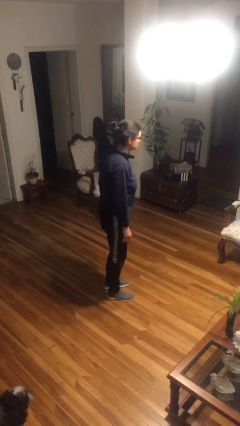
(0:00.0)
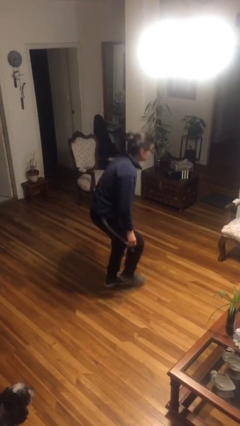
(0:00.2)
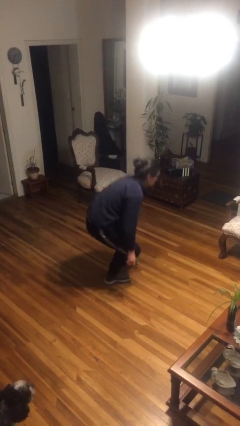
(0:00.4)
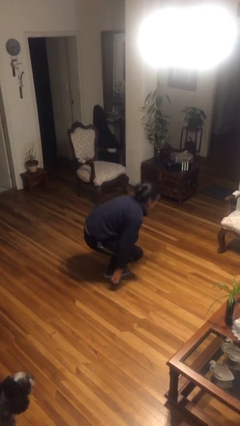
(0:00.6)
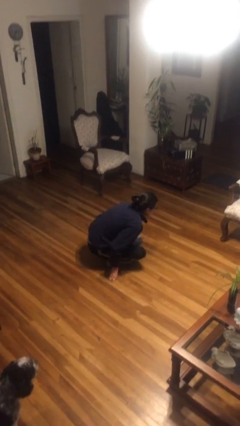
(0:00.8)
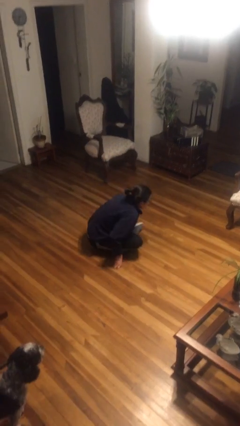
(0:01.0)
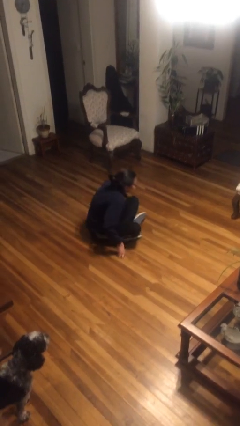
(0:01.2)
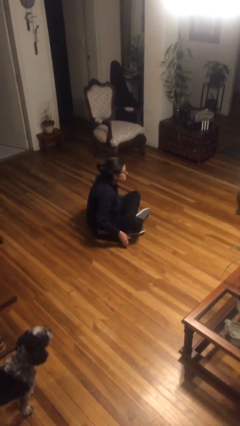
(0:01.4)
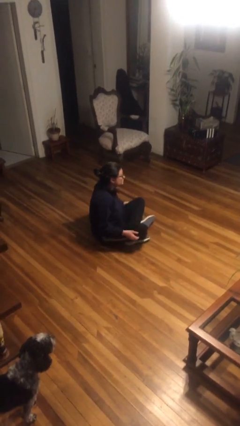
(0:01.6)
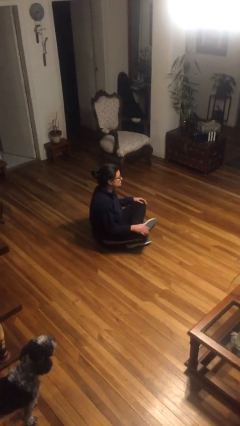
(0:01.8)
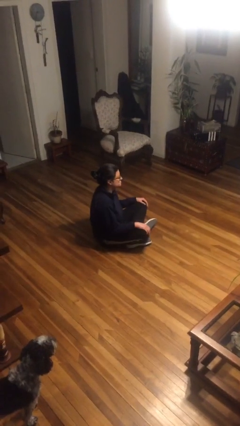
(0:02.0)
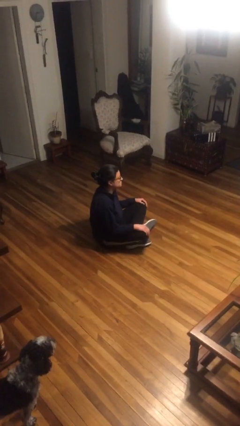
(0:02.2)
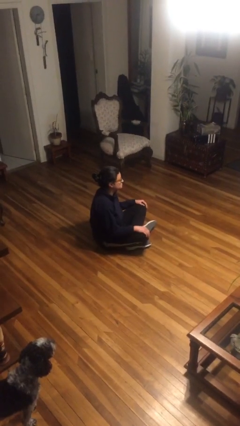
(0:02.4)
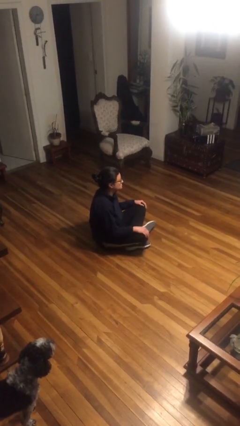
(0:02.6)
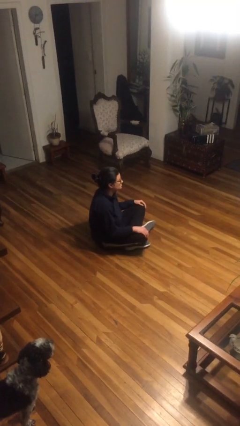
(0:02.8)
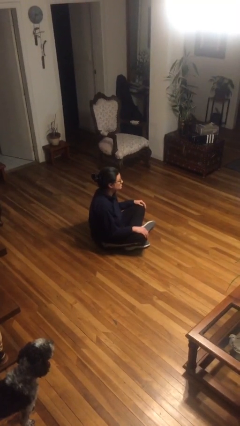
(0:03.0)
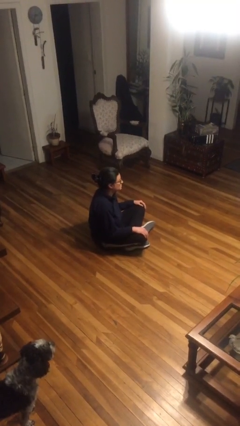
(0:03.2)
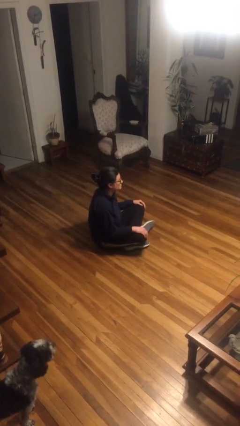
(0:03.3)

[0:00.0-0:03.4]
person sits crisscross

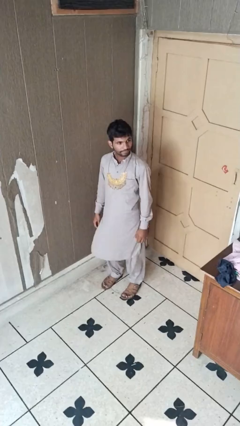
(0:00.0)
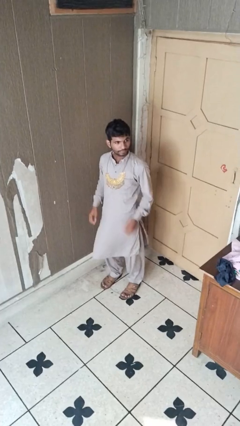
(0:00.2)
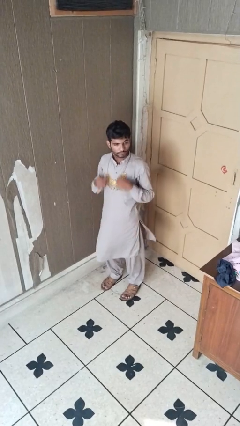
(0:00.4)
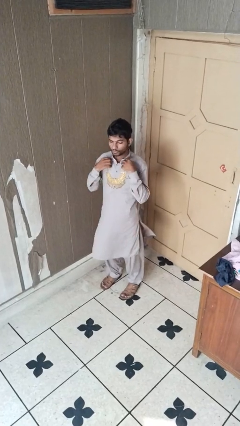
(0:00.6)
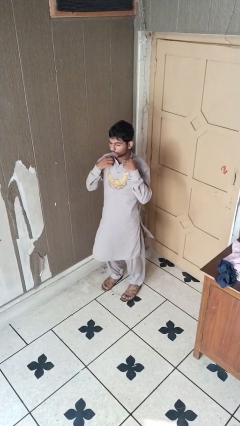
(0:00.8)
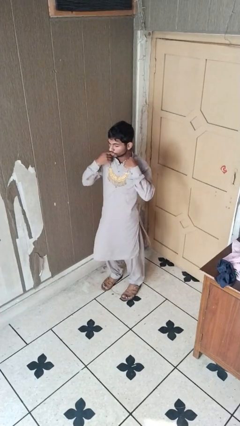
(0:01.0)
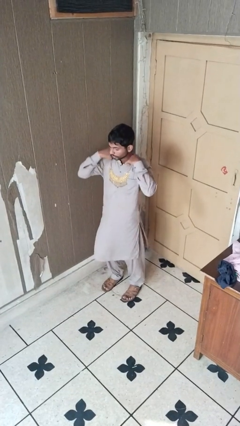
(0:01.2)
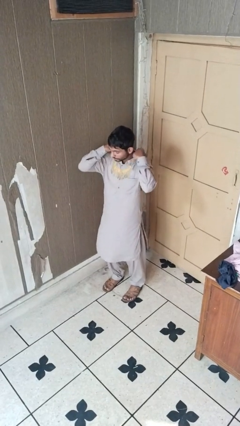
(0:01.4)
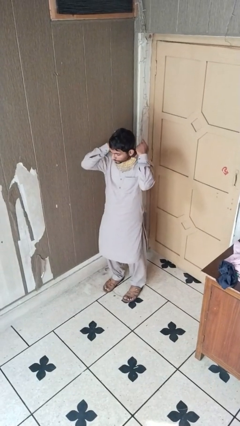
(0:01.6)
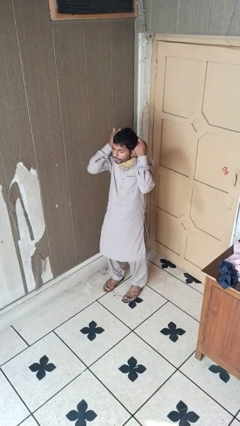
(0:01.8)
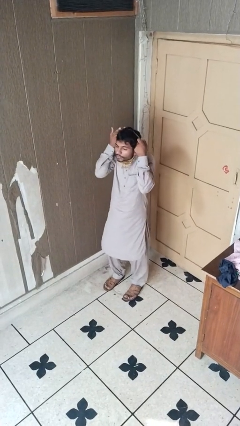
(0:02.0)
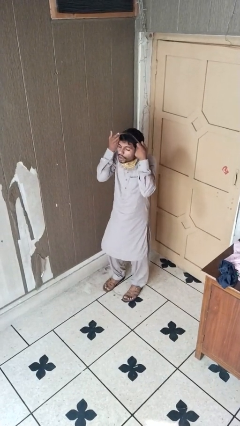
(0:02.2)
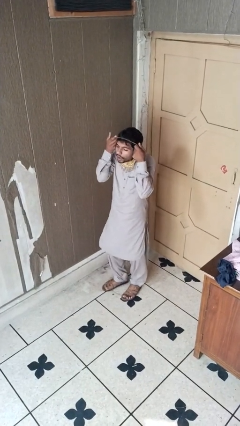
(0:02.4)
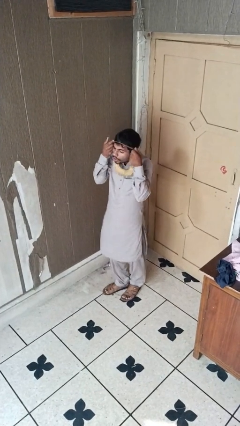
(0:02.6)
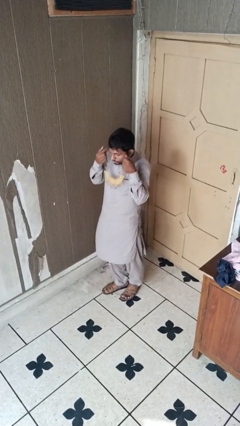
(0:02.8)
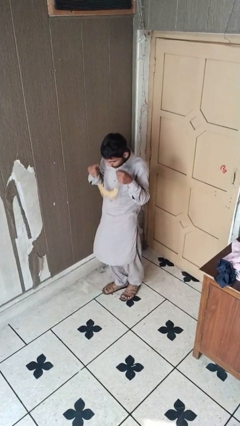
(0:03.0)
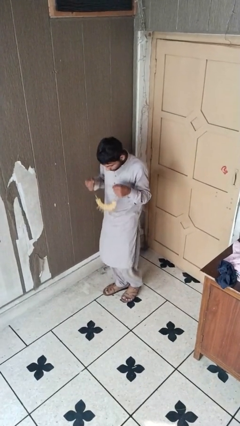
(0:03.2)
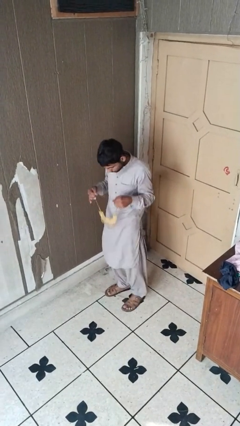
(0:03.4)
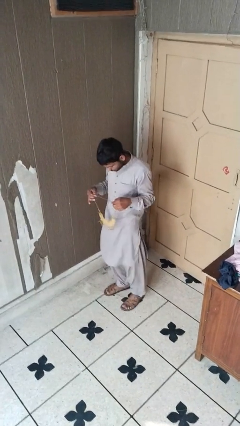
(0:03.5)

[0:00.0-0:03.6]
person takes off necklace

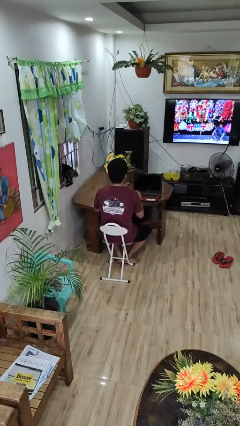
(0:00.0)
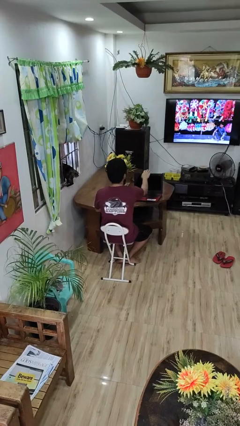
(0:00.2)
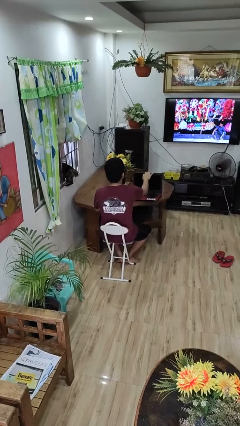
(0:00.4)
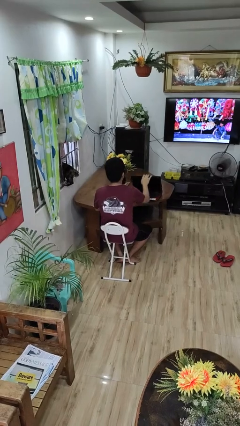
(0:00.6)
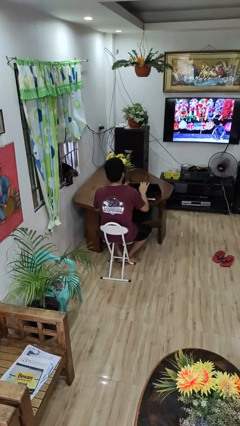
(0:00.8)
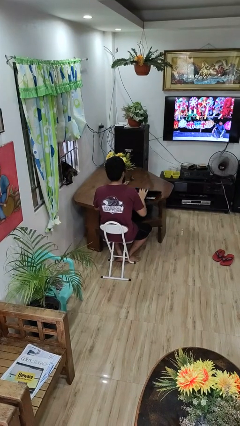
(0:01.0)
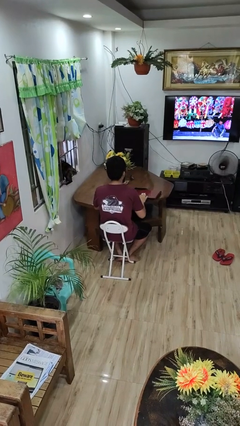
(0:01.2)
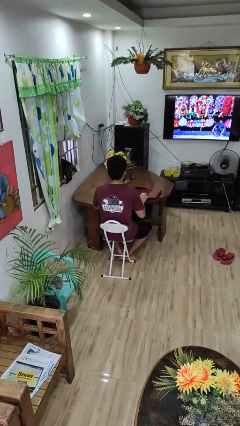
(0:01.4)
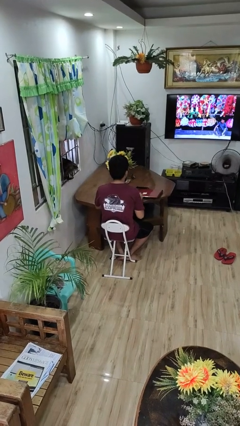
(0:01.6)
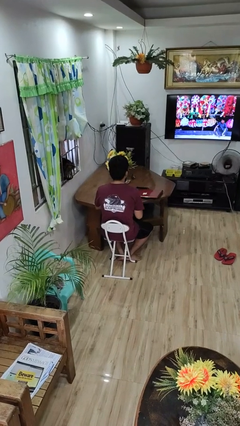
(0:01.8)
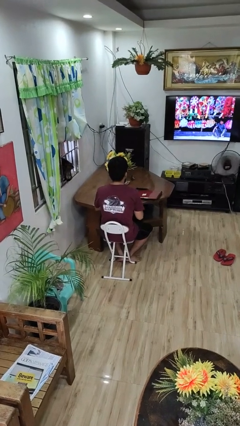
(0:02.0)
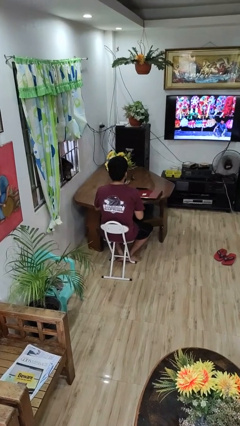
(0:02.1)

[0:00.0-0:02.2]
person closes laptop

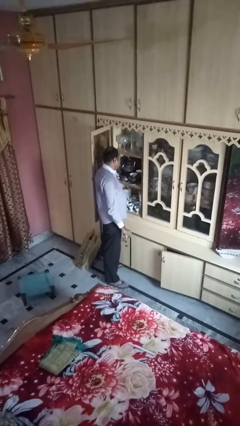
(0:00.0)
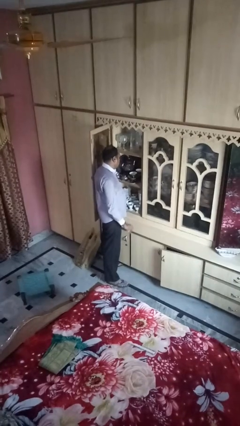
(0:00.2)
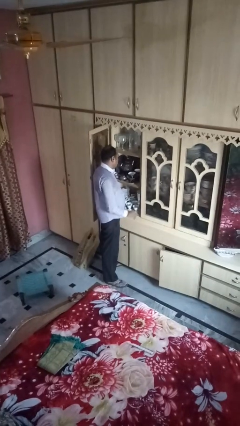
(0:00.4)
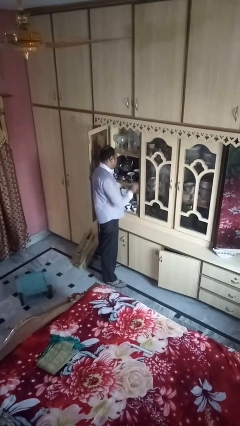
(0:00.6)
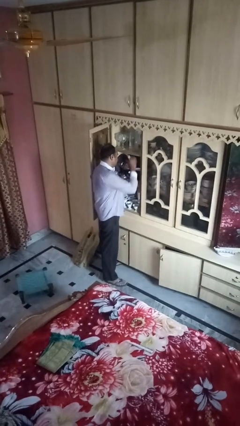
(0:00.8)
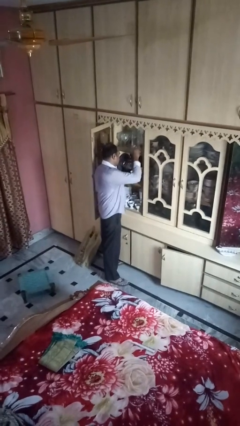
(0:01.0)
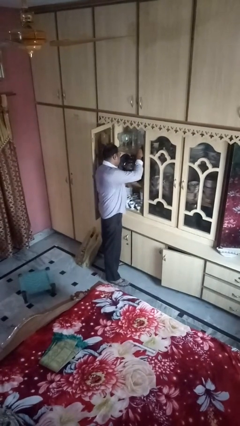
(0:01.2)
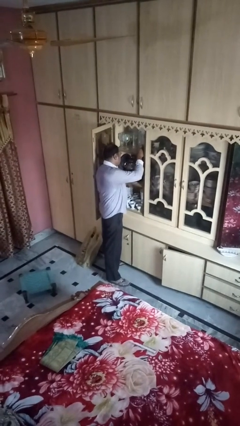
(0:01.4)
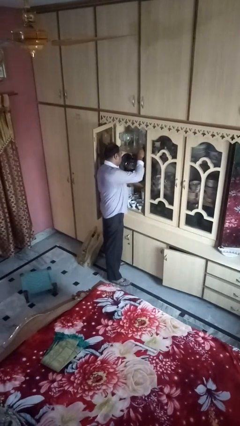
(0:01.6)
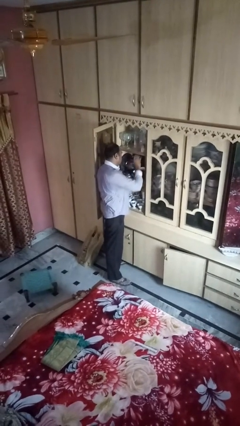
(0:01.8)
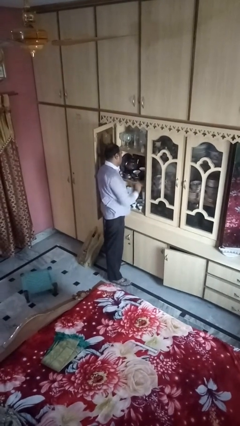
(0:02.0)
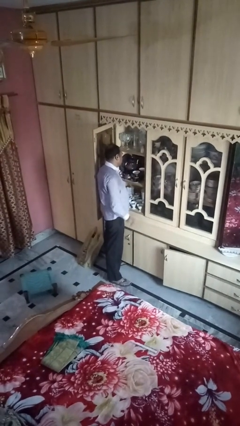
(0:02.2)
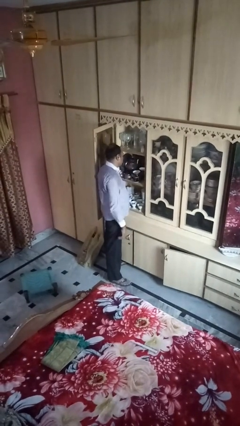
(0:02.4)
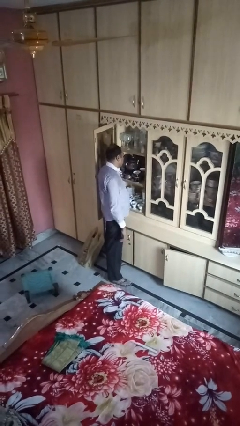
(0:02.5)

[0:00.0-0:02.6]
person puts down object on shelf

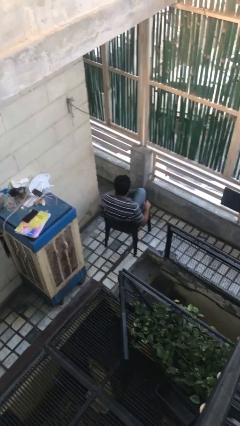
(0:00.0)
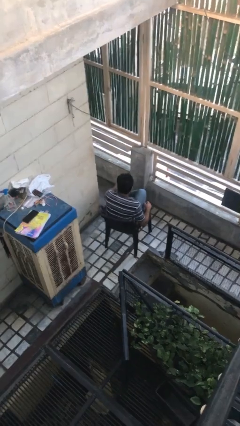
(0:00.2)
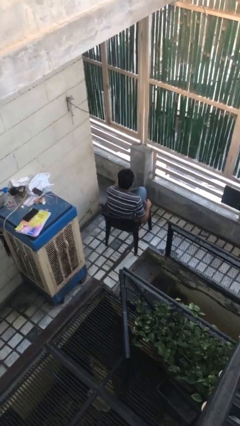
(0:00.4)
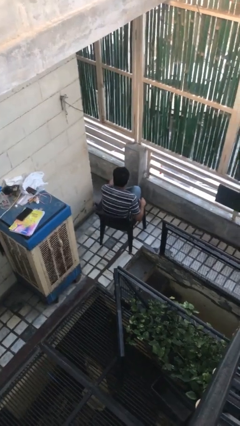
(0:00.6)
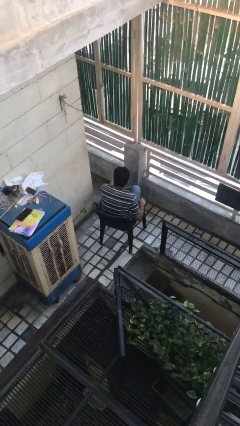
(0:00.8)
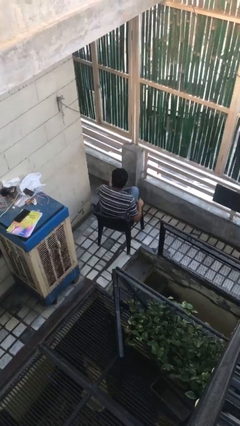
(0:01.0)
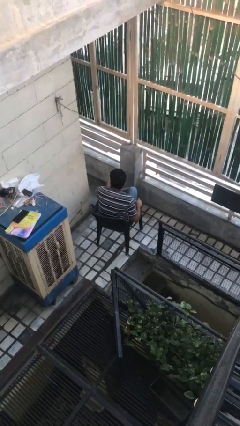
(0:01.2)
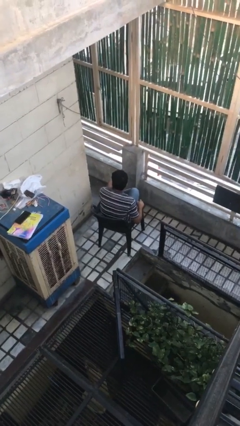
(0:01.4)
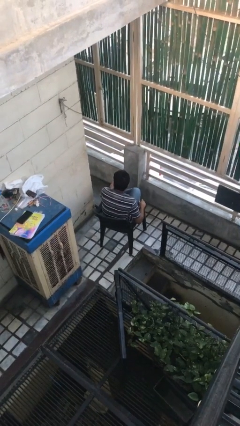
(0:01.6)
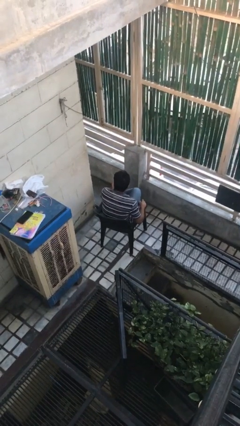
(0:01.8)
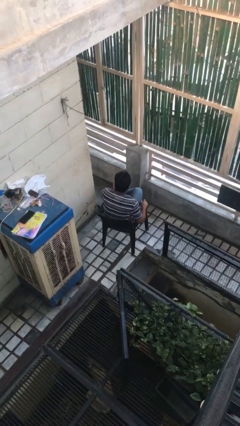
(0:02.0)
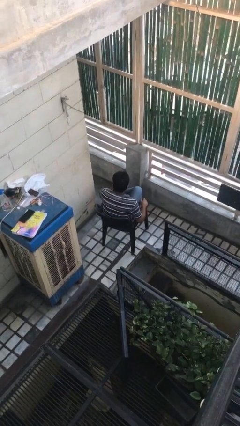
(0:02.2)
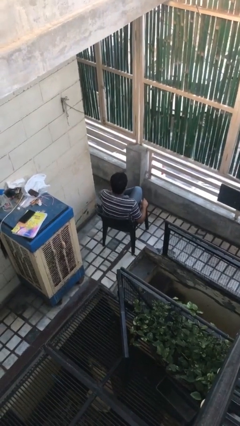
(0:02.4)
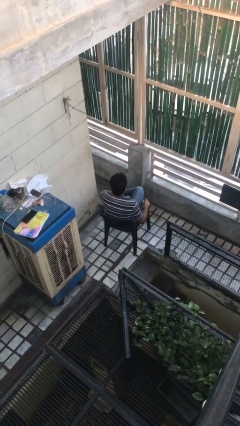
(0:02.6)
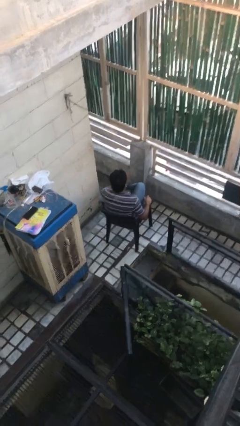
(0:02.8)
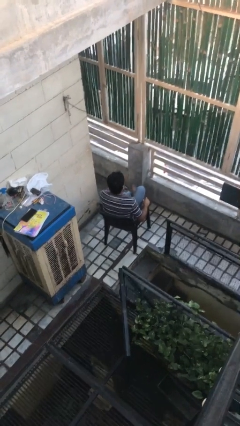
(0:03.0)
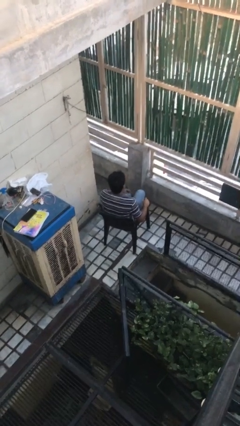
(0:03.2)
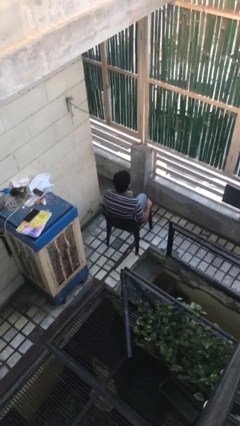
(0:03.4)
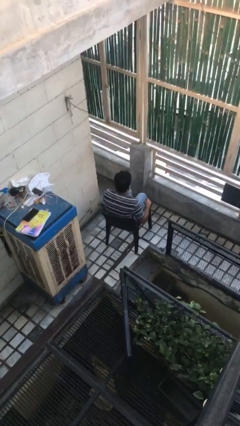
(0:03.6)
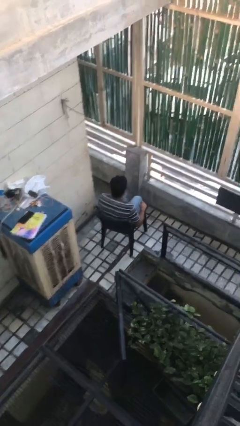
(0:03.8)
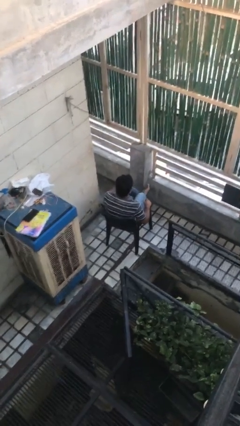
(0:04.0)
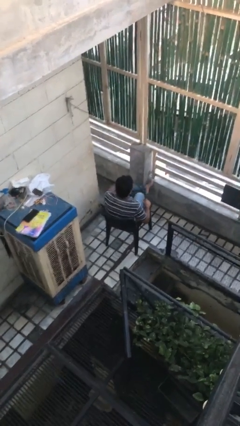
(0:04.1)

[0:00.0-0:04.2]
person rubs foot

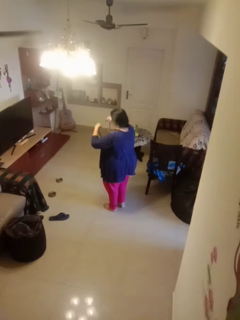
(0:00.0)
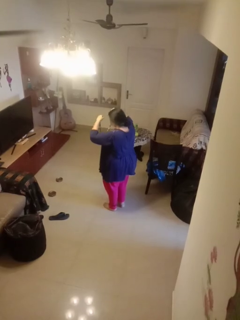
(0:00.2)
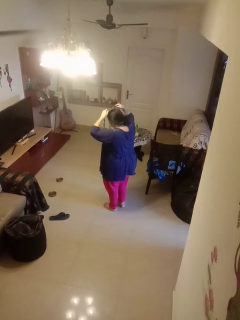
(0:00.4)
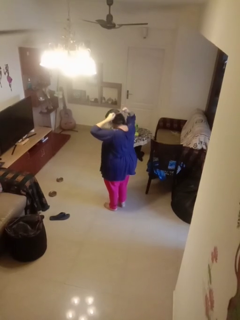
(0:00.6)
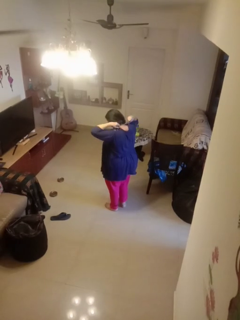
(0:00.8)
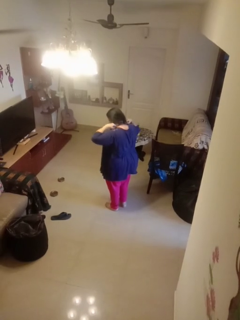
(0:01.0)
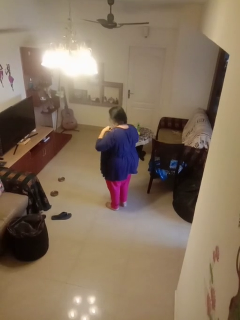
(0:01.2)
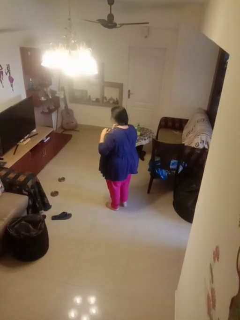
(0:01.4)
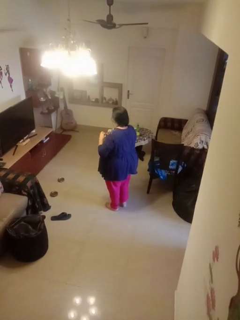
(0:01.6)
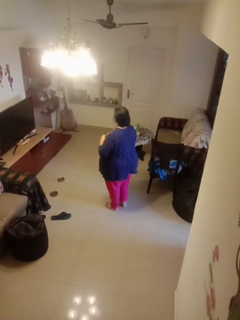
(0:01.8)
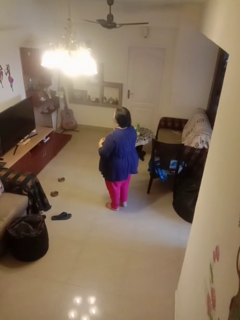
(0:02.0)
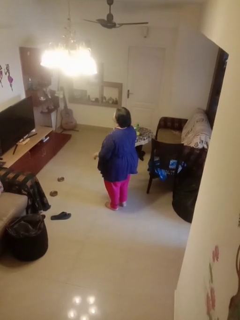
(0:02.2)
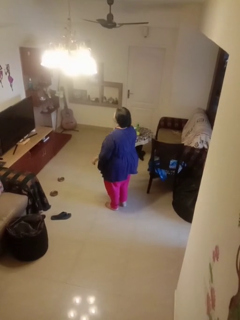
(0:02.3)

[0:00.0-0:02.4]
person puts on necklace
